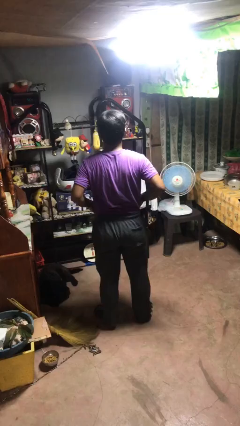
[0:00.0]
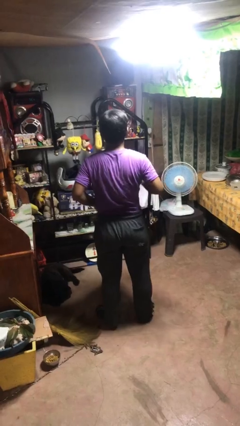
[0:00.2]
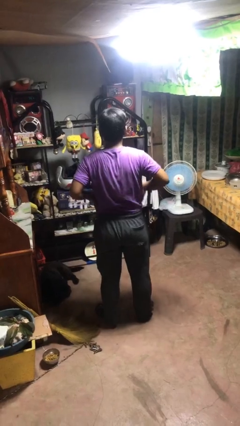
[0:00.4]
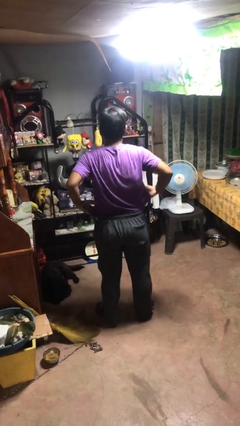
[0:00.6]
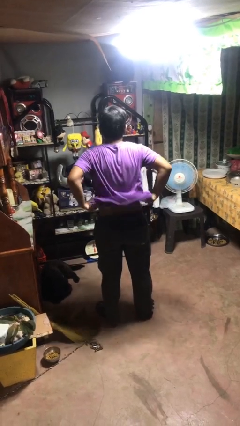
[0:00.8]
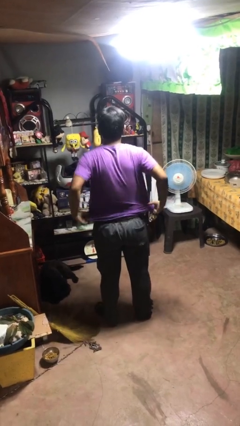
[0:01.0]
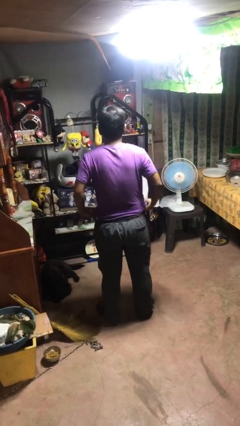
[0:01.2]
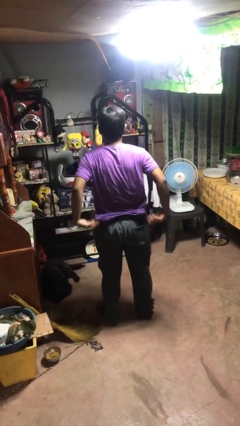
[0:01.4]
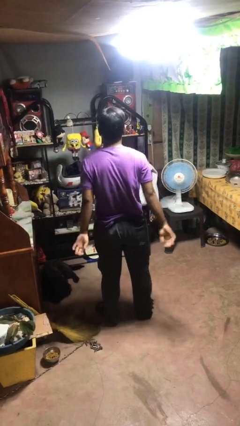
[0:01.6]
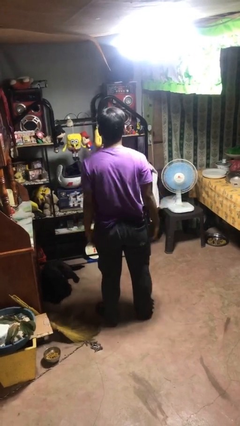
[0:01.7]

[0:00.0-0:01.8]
person untucks shirt

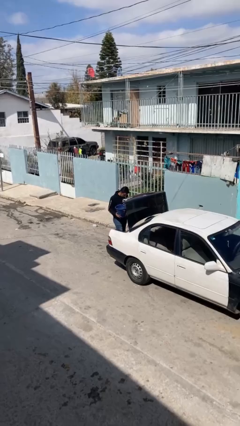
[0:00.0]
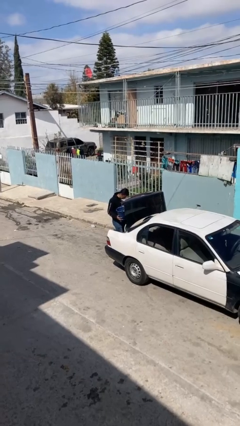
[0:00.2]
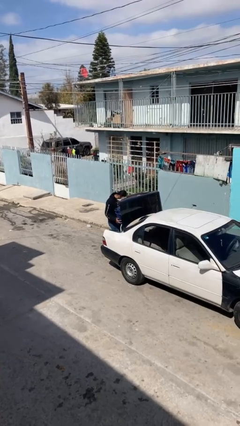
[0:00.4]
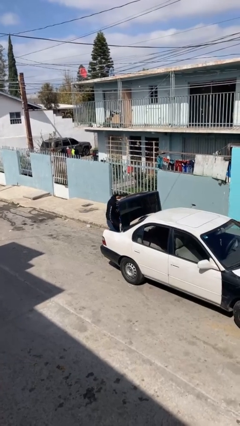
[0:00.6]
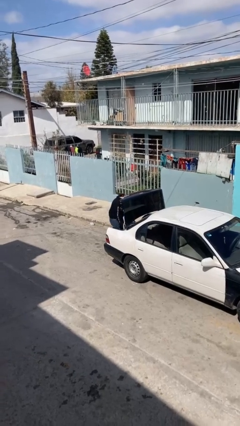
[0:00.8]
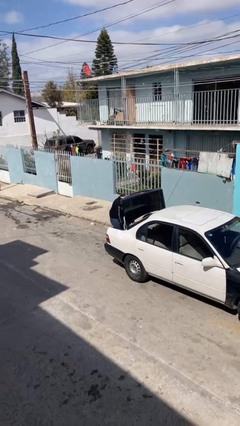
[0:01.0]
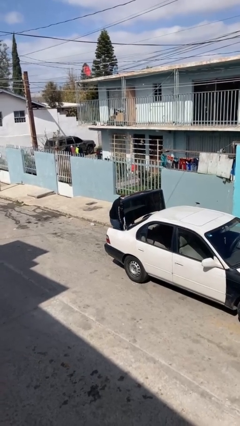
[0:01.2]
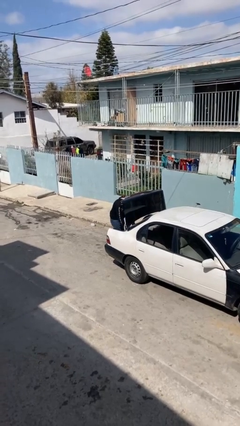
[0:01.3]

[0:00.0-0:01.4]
person loads car

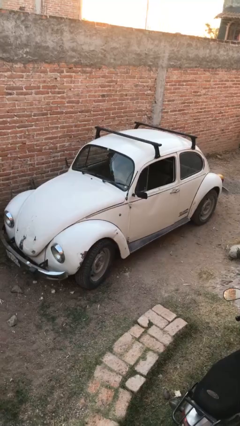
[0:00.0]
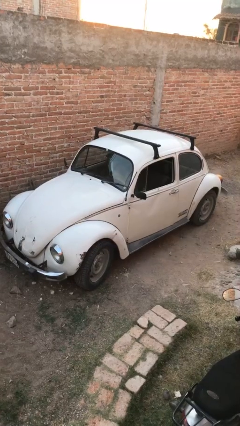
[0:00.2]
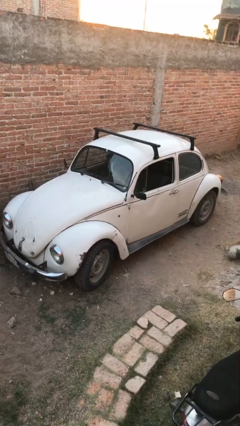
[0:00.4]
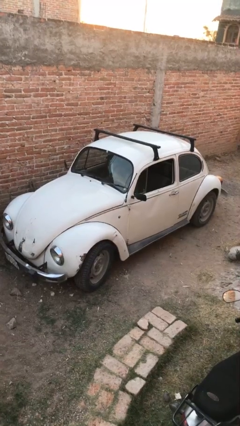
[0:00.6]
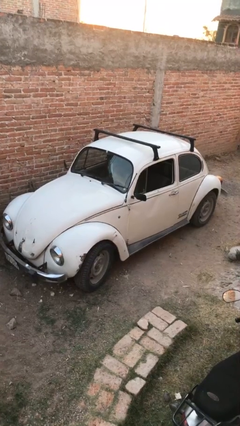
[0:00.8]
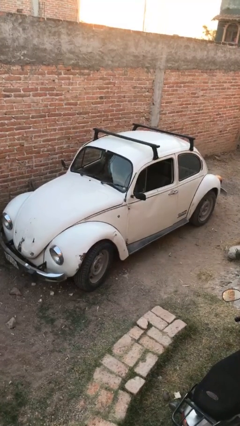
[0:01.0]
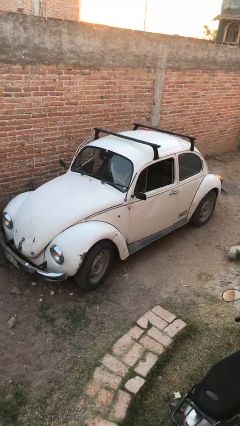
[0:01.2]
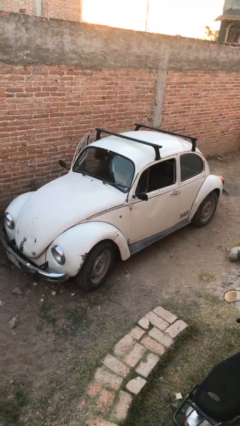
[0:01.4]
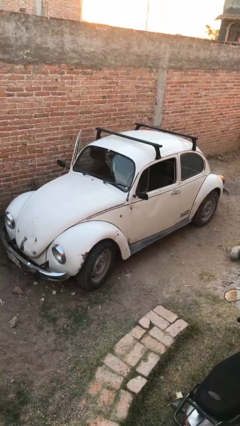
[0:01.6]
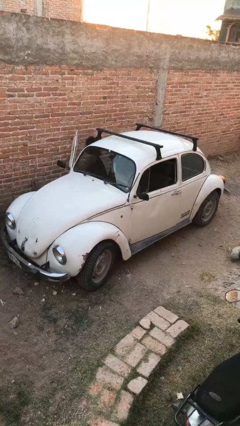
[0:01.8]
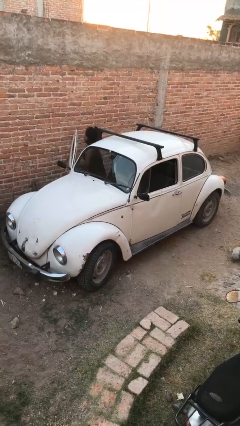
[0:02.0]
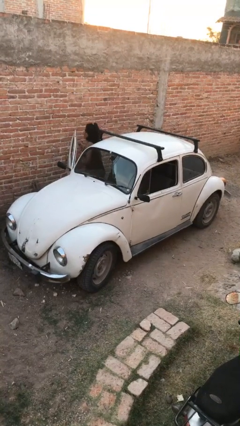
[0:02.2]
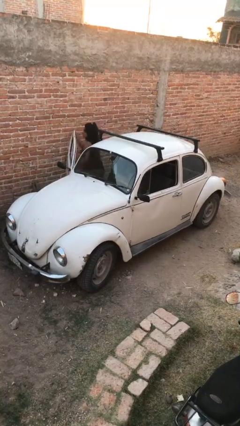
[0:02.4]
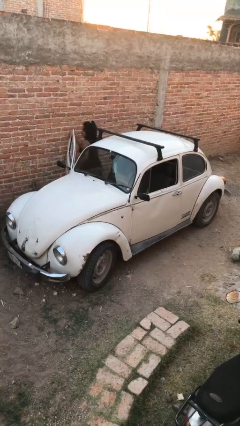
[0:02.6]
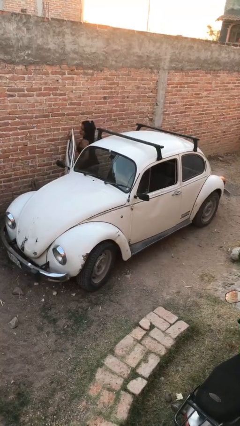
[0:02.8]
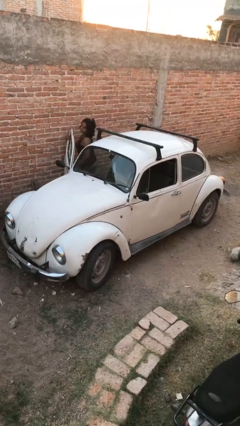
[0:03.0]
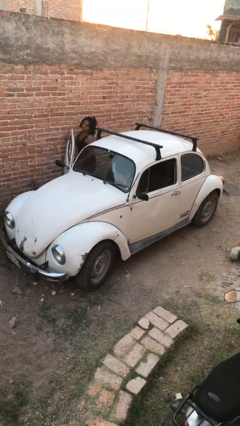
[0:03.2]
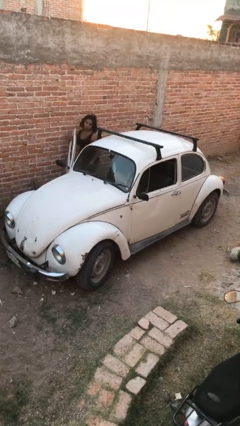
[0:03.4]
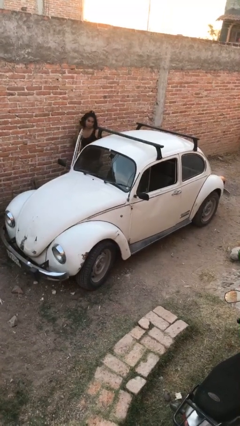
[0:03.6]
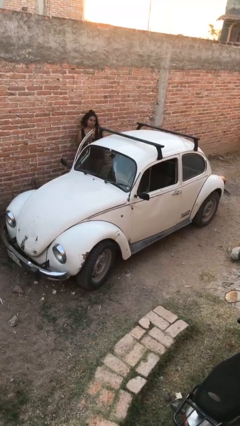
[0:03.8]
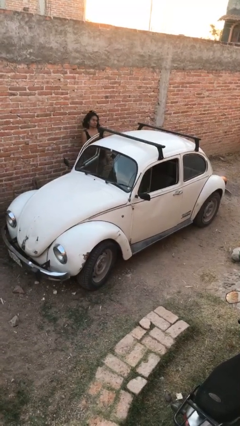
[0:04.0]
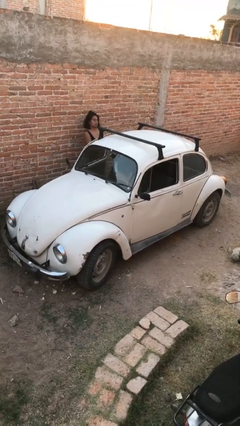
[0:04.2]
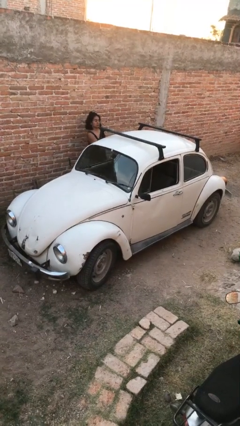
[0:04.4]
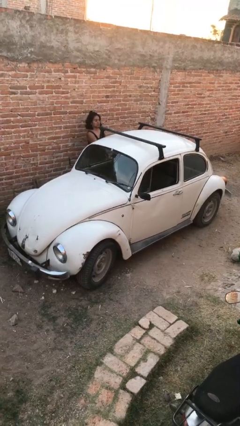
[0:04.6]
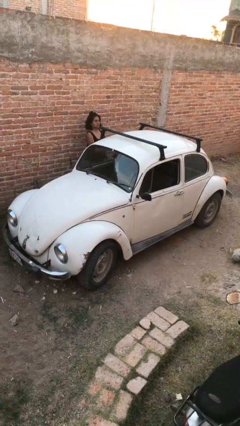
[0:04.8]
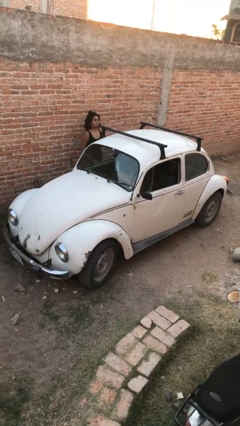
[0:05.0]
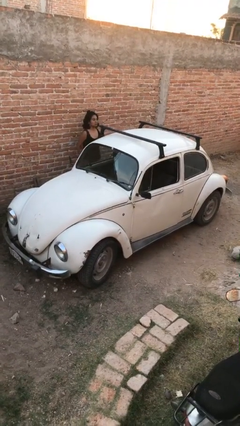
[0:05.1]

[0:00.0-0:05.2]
car drops off person

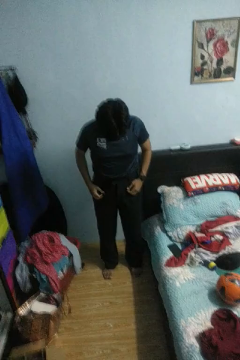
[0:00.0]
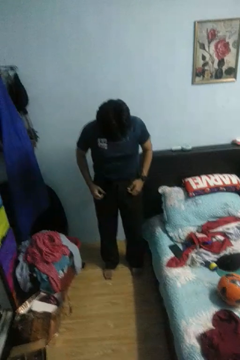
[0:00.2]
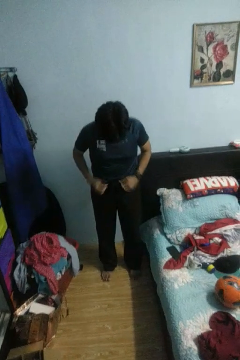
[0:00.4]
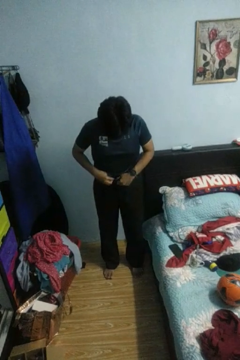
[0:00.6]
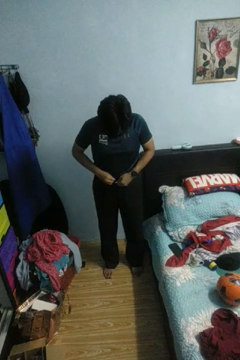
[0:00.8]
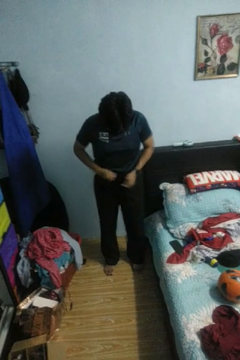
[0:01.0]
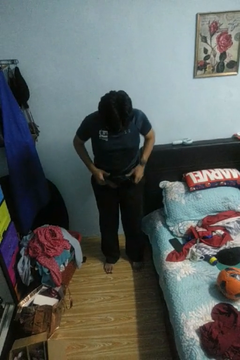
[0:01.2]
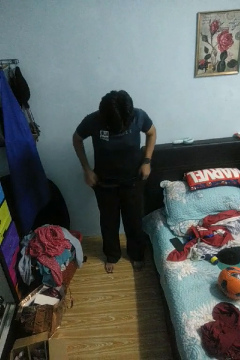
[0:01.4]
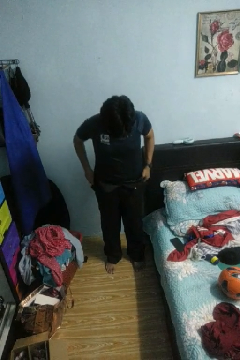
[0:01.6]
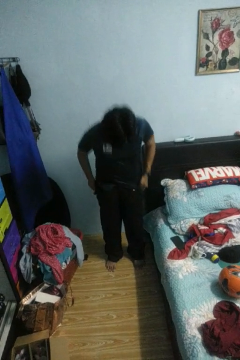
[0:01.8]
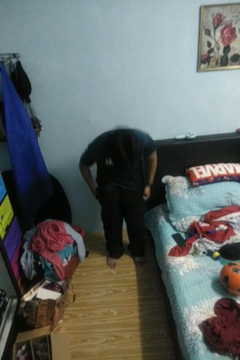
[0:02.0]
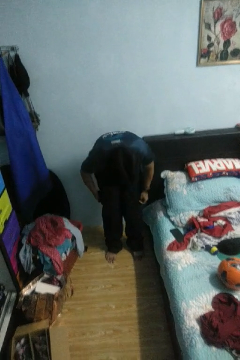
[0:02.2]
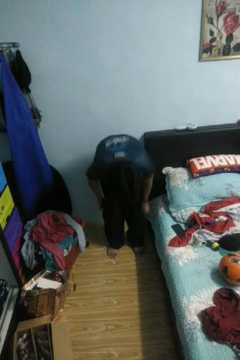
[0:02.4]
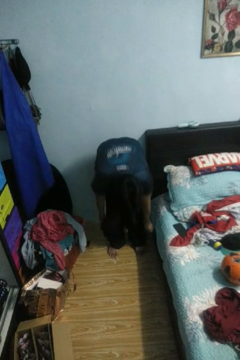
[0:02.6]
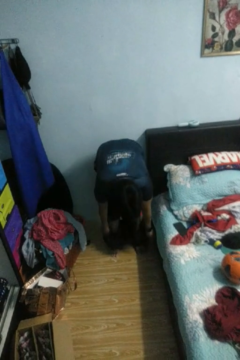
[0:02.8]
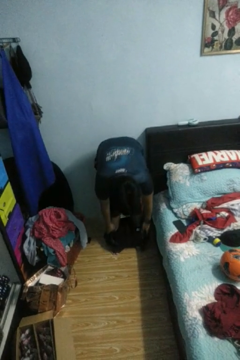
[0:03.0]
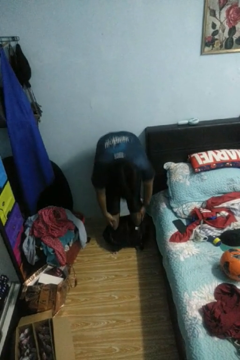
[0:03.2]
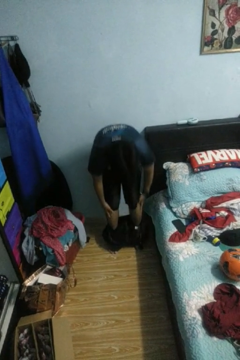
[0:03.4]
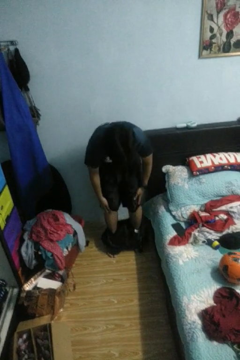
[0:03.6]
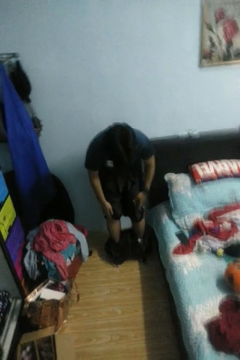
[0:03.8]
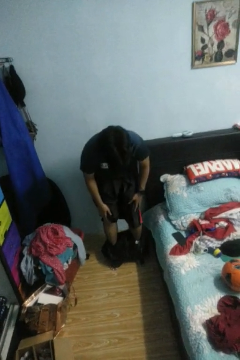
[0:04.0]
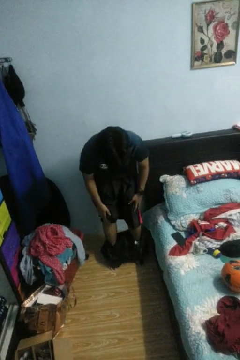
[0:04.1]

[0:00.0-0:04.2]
person takes off pants

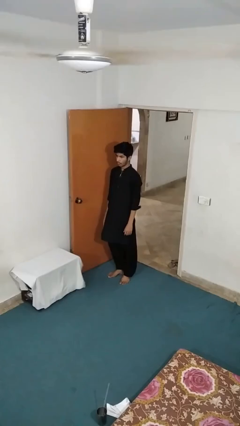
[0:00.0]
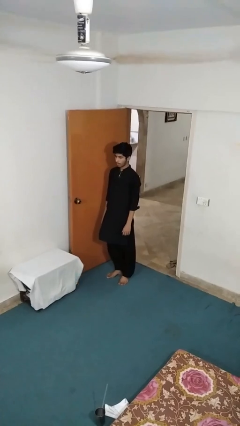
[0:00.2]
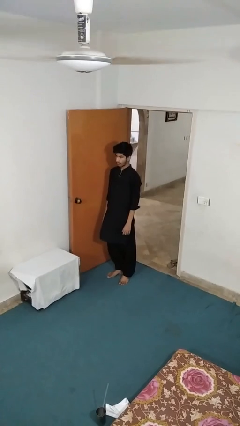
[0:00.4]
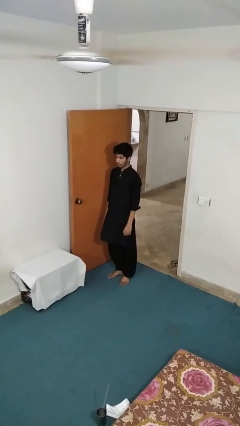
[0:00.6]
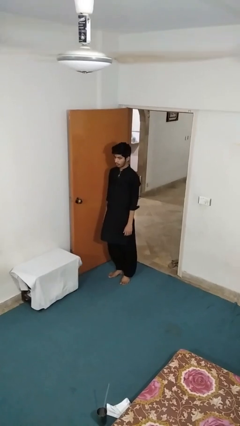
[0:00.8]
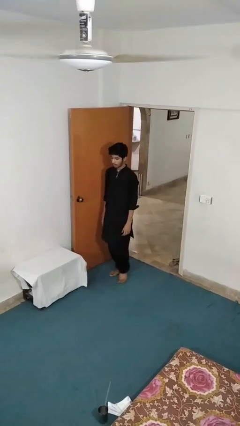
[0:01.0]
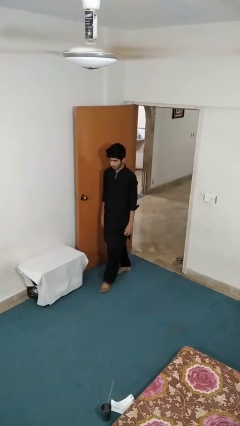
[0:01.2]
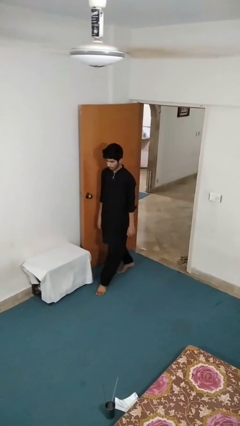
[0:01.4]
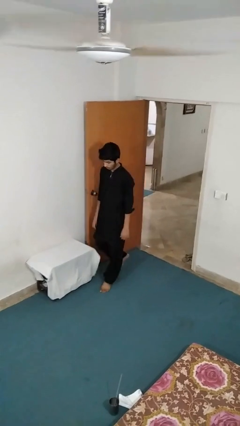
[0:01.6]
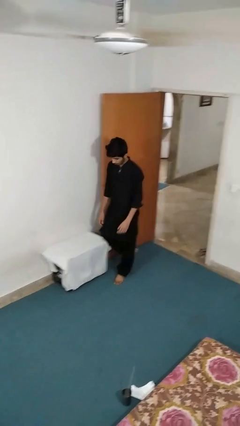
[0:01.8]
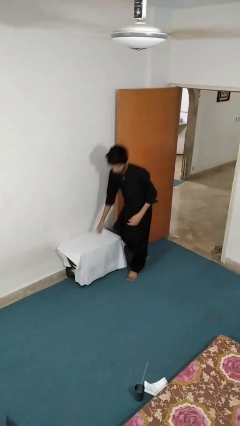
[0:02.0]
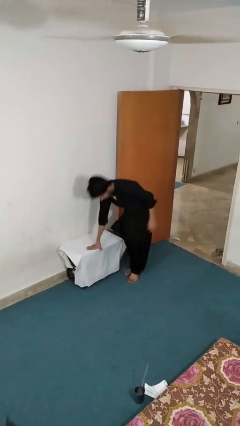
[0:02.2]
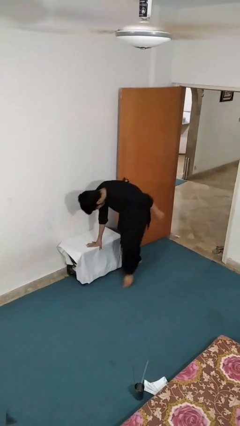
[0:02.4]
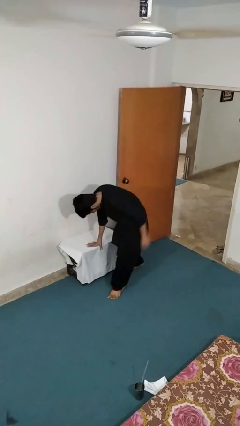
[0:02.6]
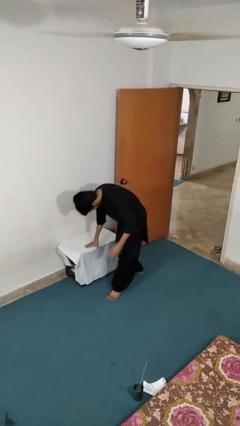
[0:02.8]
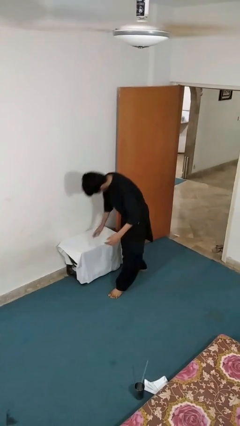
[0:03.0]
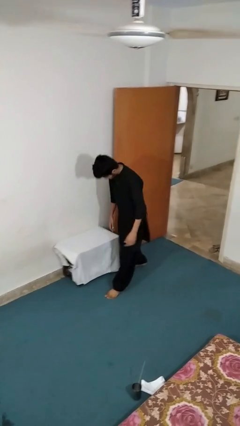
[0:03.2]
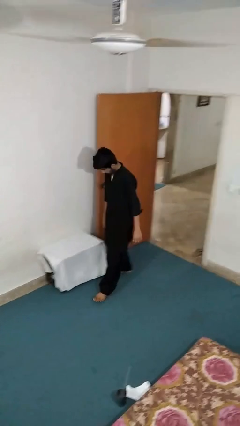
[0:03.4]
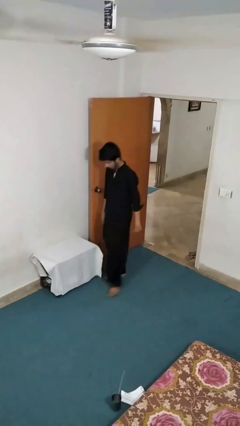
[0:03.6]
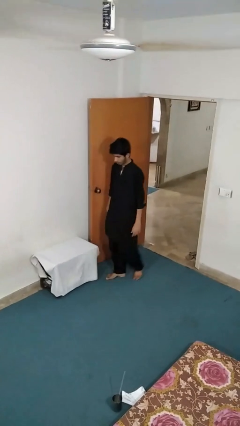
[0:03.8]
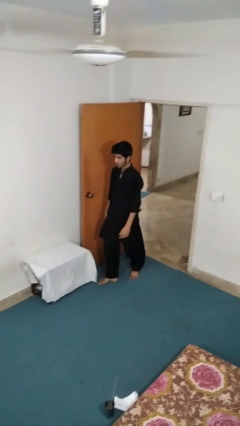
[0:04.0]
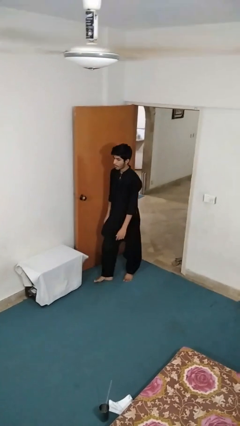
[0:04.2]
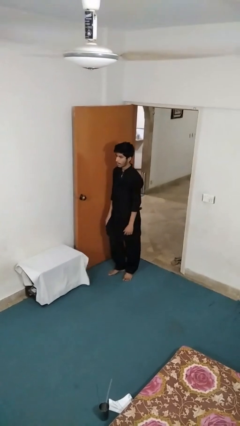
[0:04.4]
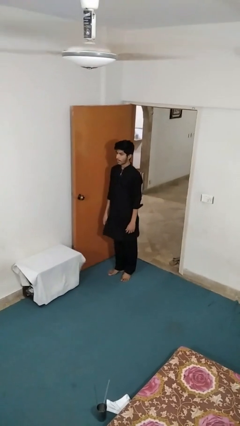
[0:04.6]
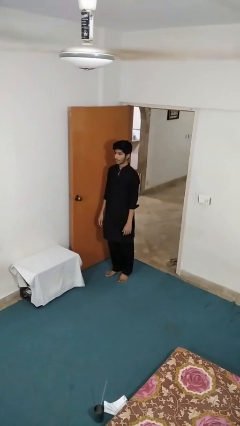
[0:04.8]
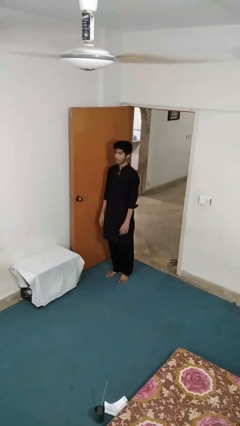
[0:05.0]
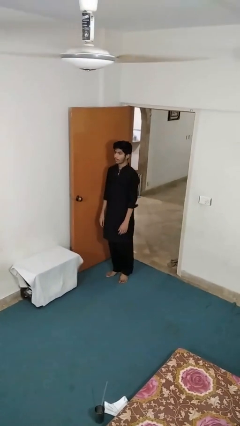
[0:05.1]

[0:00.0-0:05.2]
person bumps into table

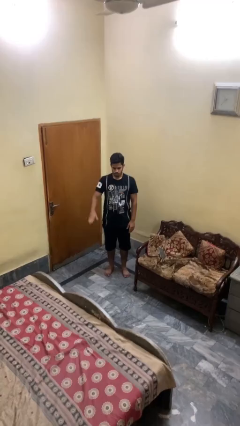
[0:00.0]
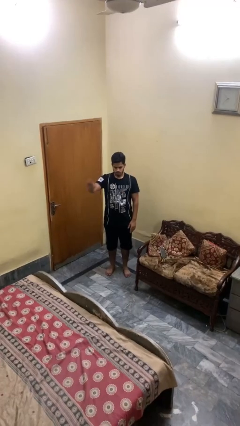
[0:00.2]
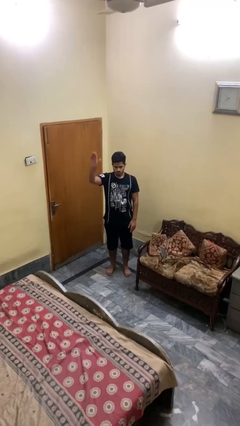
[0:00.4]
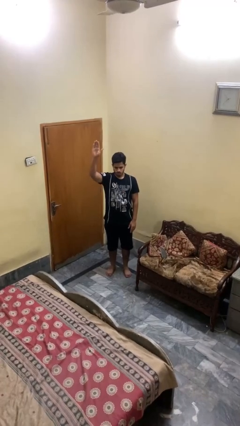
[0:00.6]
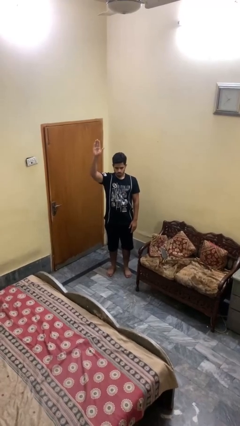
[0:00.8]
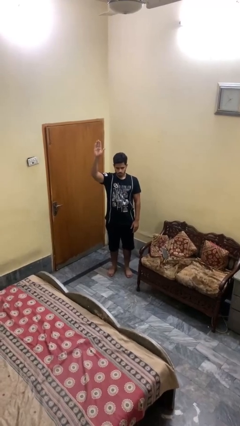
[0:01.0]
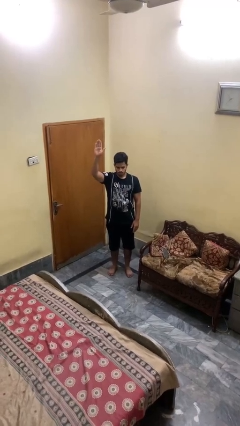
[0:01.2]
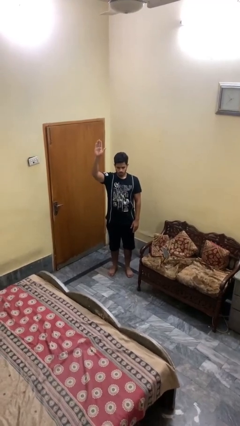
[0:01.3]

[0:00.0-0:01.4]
person gestures raise hand
